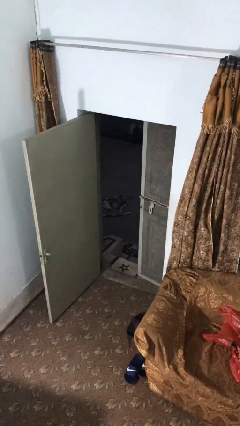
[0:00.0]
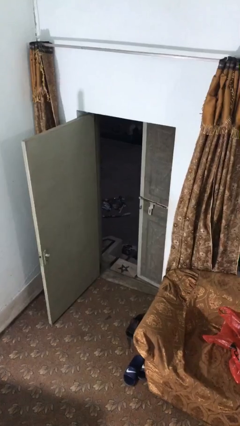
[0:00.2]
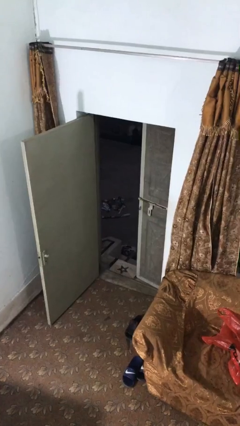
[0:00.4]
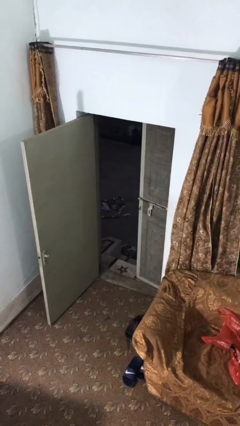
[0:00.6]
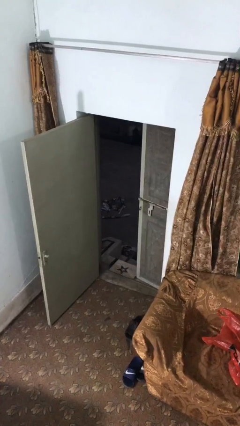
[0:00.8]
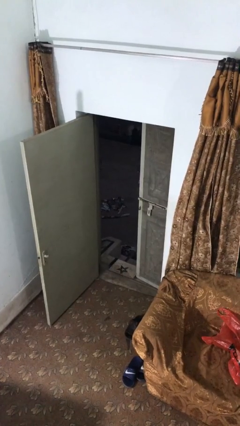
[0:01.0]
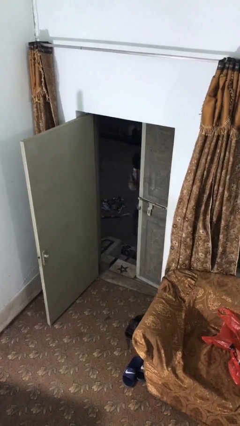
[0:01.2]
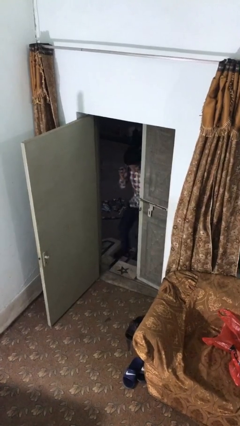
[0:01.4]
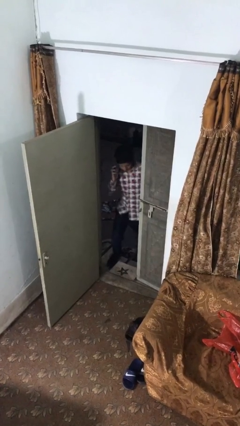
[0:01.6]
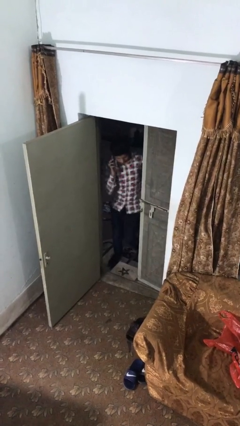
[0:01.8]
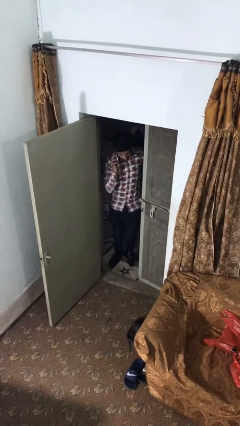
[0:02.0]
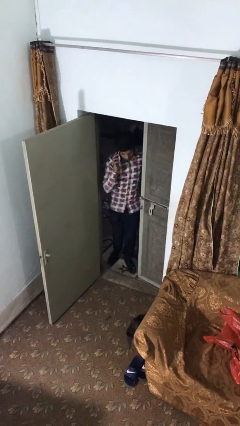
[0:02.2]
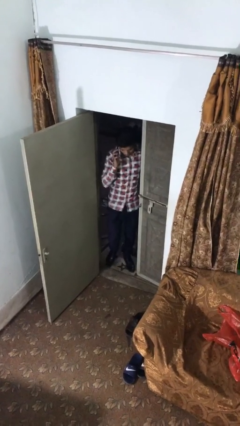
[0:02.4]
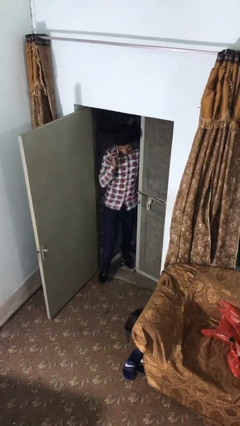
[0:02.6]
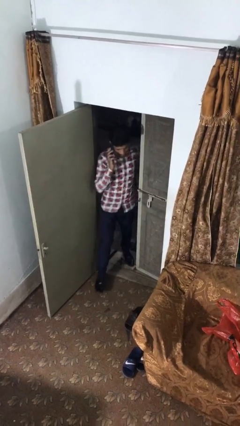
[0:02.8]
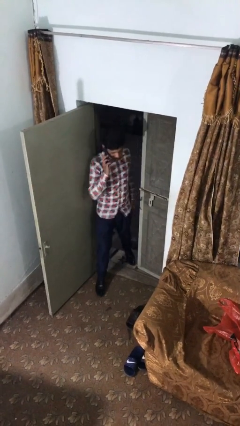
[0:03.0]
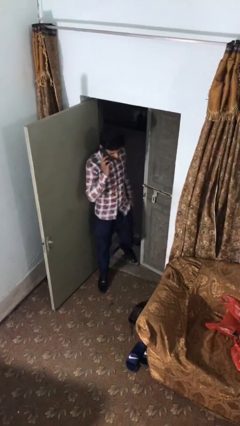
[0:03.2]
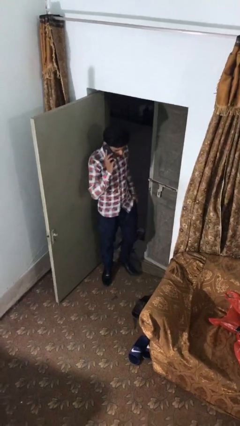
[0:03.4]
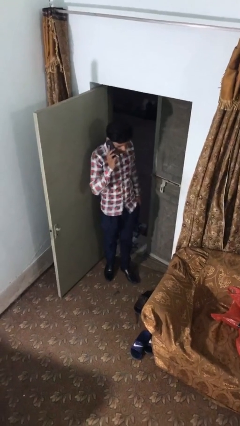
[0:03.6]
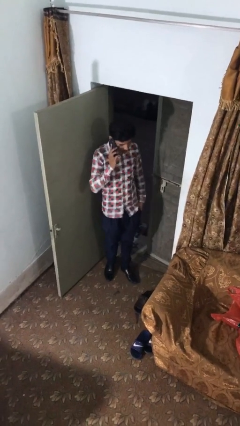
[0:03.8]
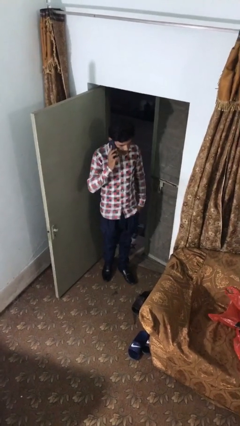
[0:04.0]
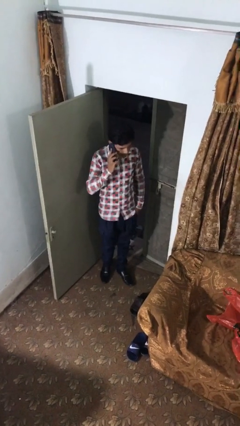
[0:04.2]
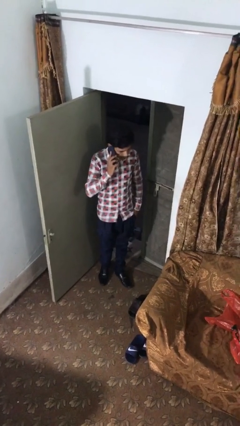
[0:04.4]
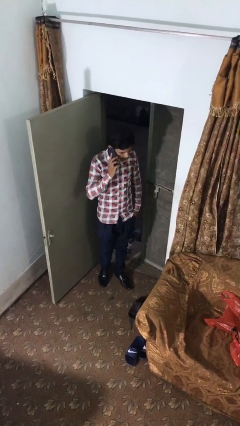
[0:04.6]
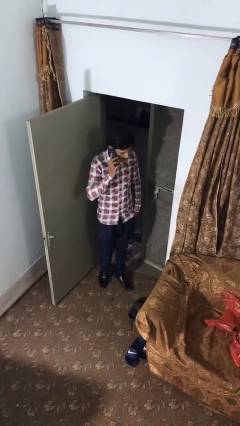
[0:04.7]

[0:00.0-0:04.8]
person enters scene through structure

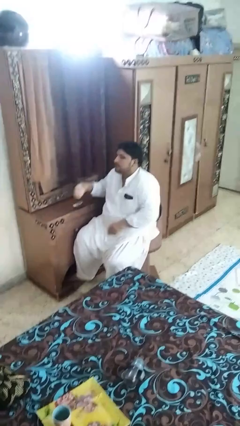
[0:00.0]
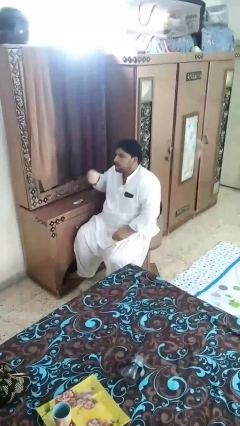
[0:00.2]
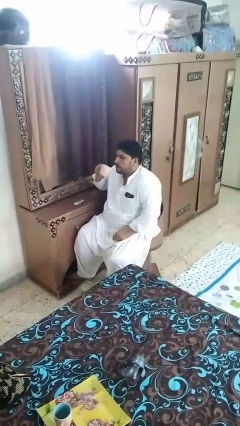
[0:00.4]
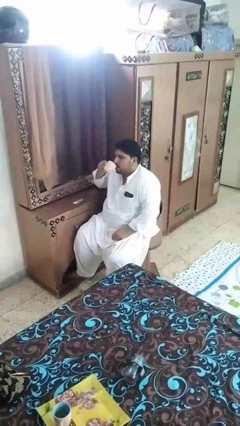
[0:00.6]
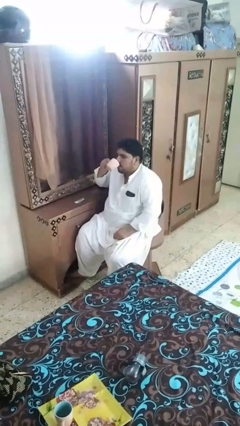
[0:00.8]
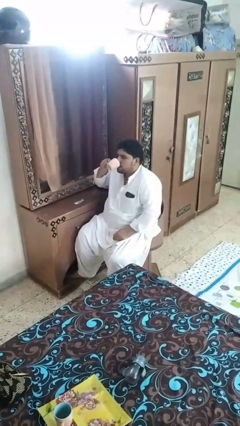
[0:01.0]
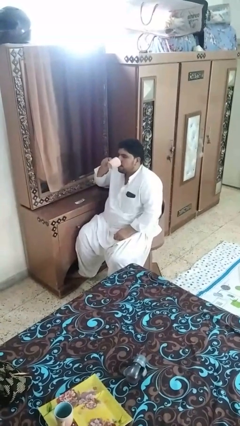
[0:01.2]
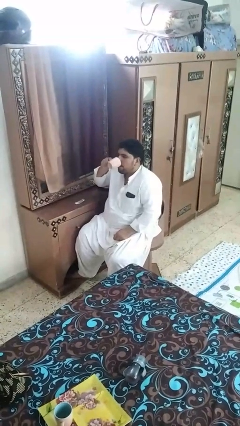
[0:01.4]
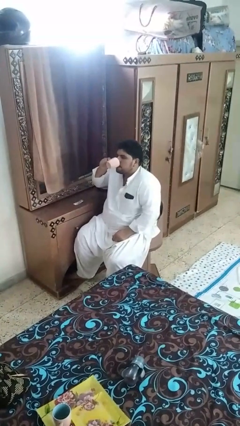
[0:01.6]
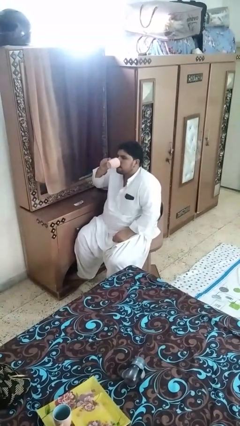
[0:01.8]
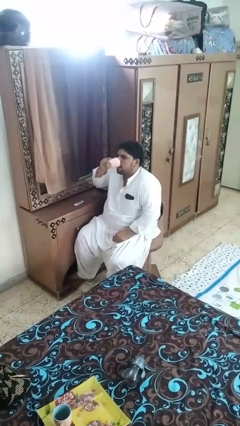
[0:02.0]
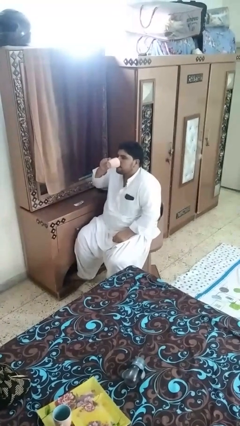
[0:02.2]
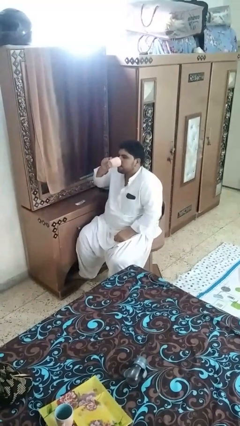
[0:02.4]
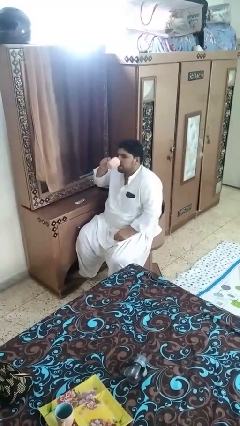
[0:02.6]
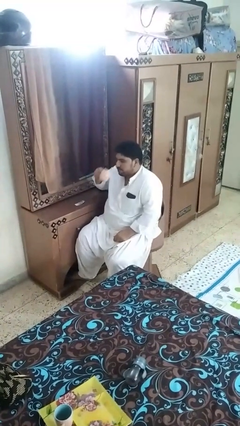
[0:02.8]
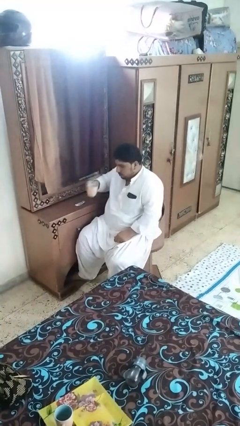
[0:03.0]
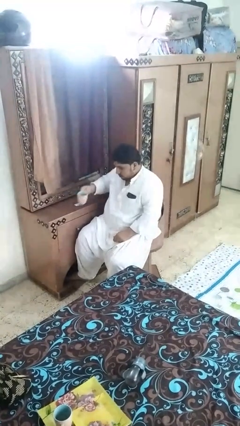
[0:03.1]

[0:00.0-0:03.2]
person drinks from cup

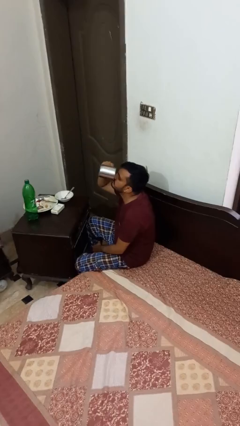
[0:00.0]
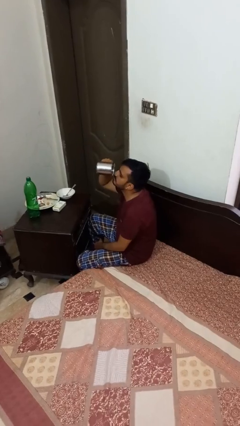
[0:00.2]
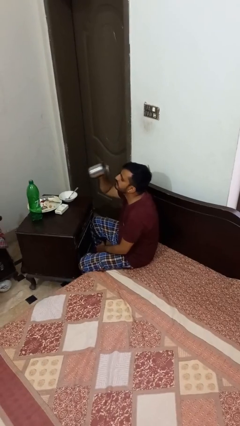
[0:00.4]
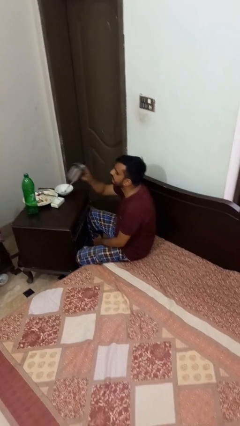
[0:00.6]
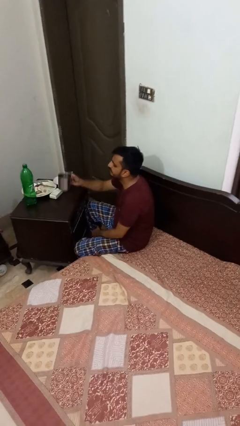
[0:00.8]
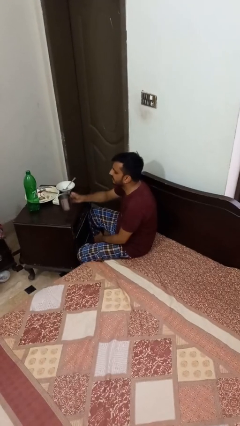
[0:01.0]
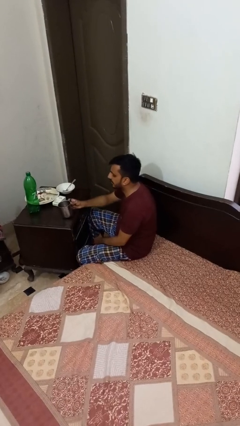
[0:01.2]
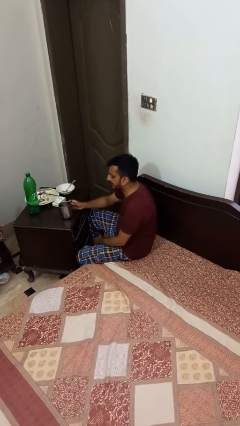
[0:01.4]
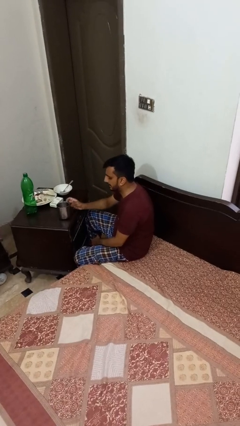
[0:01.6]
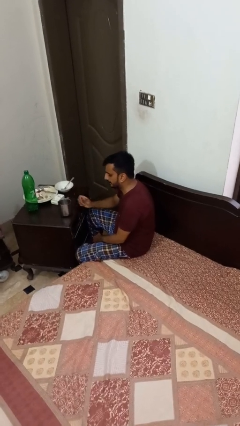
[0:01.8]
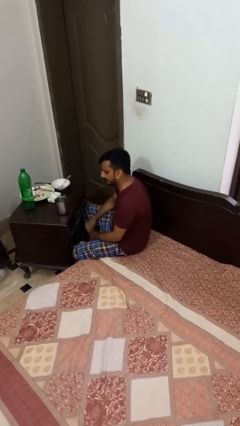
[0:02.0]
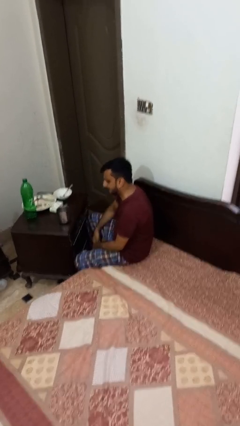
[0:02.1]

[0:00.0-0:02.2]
person puts down object on table

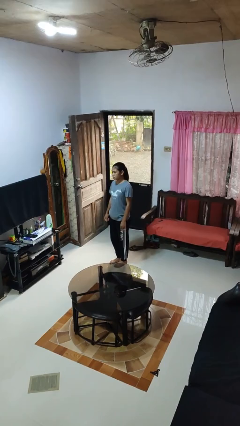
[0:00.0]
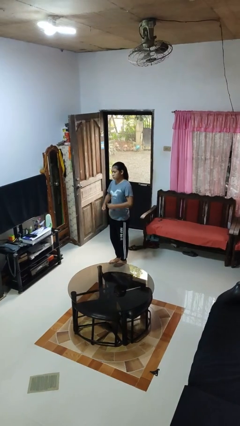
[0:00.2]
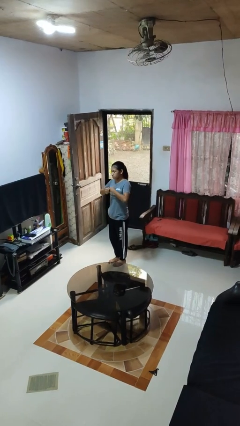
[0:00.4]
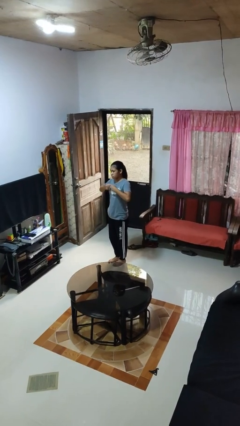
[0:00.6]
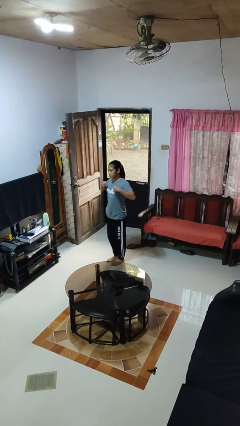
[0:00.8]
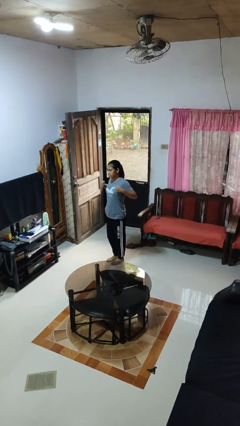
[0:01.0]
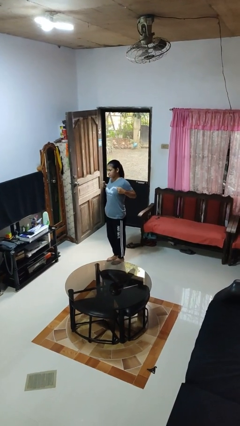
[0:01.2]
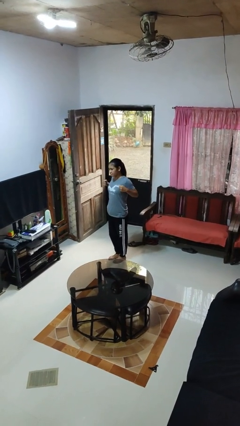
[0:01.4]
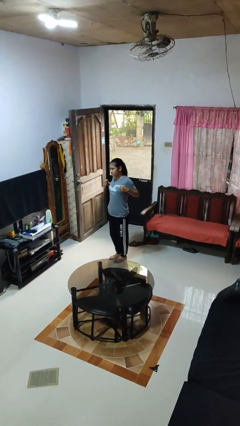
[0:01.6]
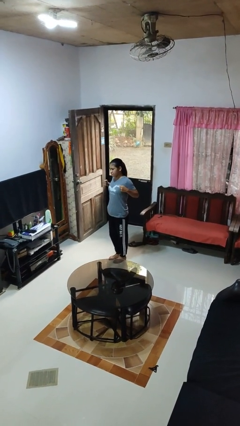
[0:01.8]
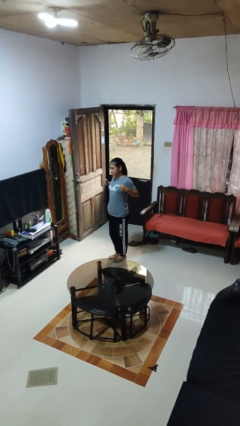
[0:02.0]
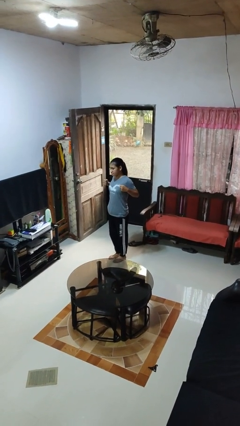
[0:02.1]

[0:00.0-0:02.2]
person gestures zoom in

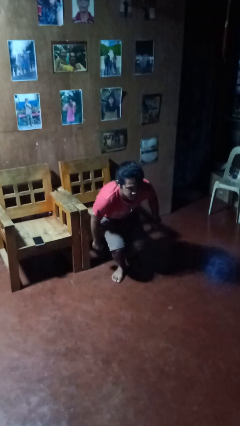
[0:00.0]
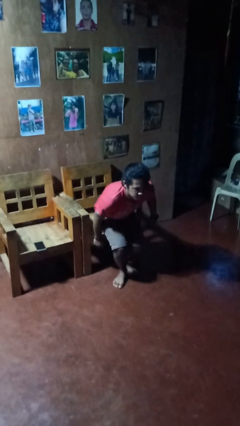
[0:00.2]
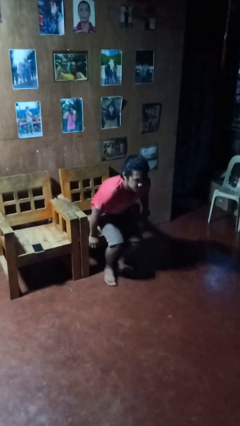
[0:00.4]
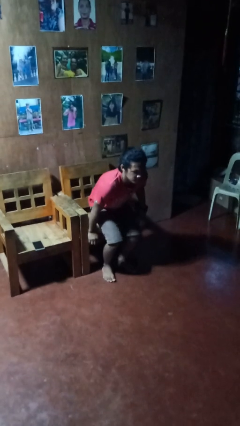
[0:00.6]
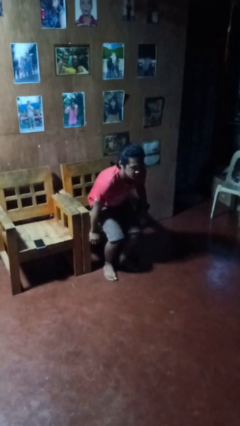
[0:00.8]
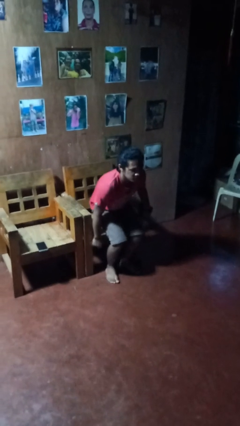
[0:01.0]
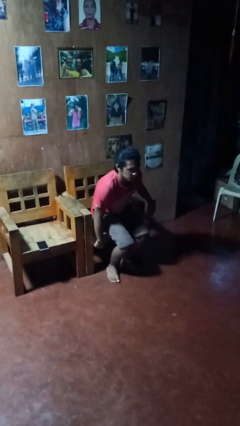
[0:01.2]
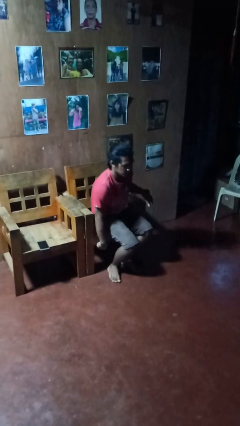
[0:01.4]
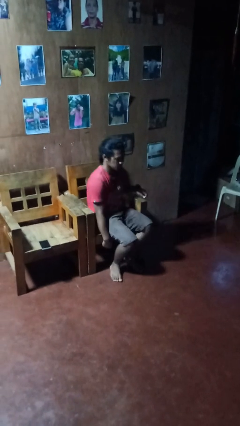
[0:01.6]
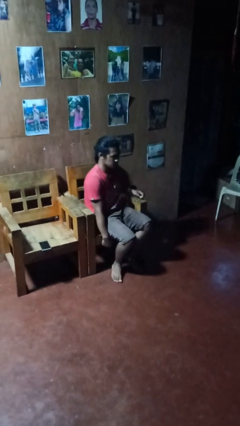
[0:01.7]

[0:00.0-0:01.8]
person stands up from floor

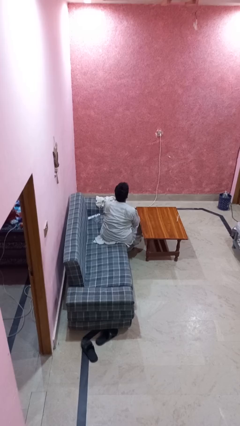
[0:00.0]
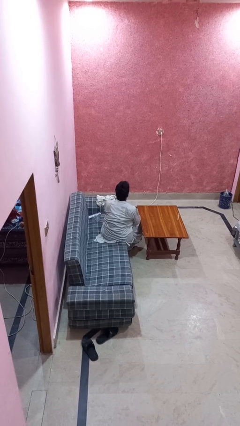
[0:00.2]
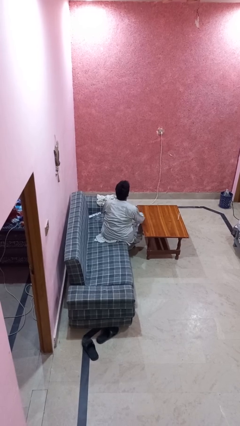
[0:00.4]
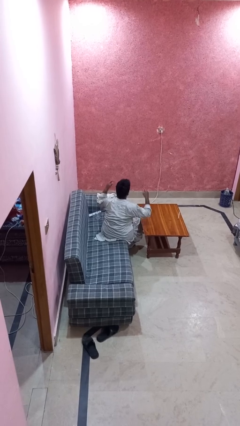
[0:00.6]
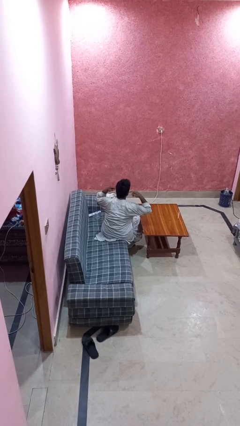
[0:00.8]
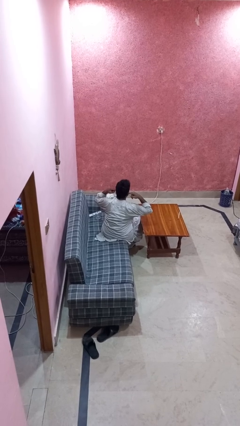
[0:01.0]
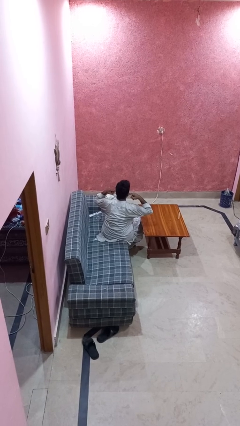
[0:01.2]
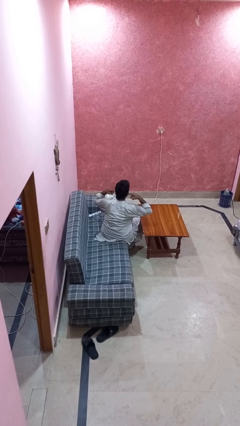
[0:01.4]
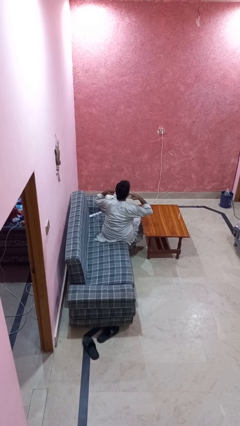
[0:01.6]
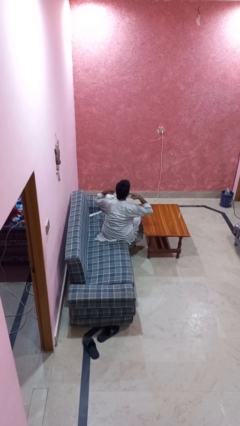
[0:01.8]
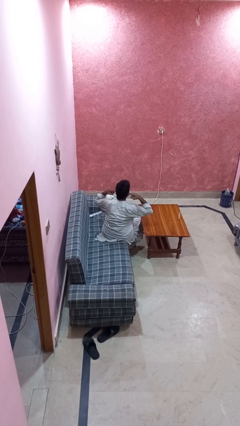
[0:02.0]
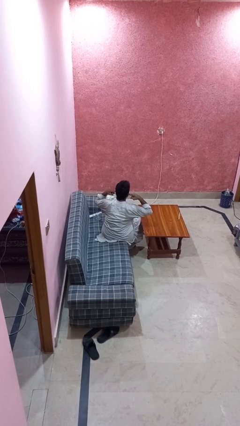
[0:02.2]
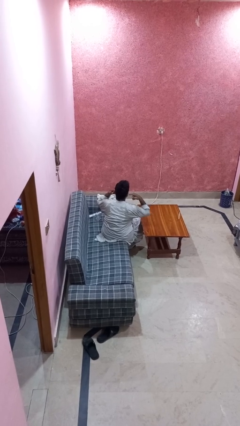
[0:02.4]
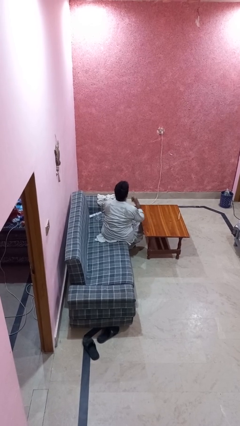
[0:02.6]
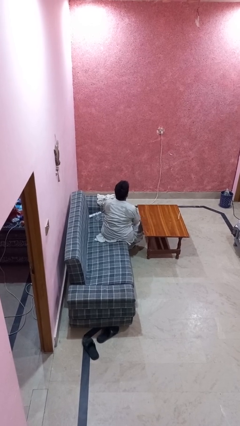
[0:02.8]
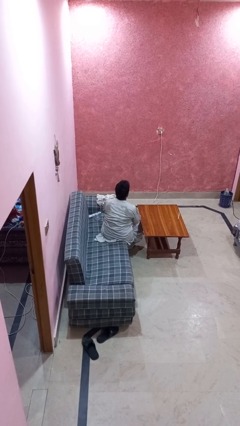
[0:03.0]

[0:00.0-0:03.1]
person puts fingers in ear
